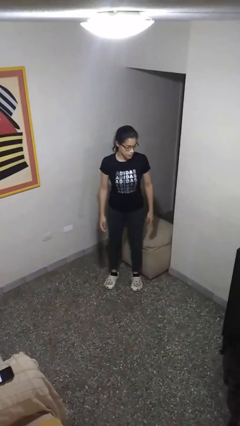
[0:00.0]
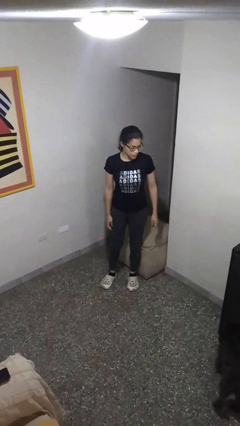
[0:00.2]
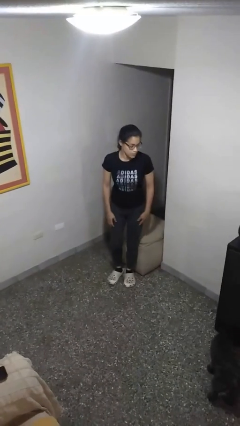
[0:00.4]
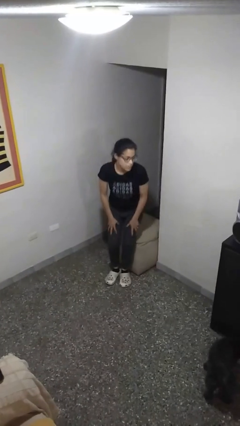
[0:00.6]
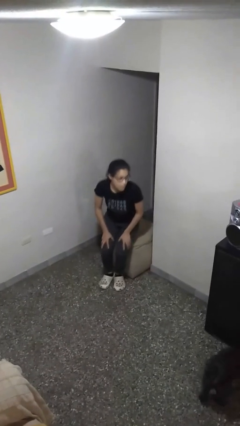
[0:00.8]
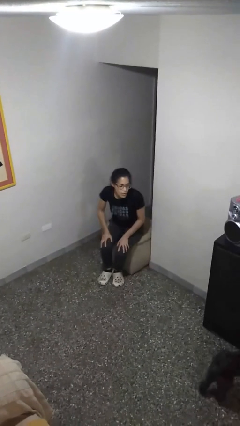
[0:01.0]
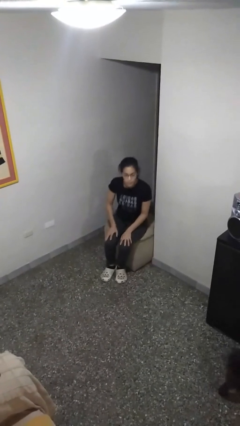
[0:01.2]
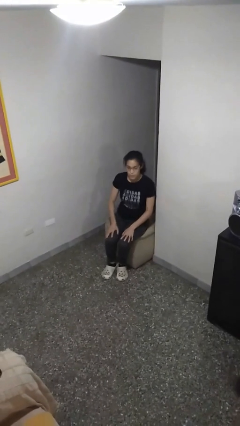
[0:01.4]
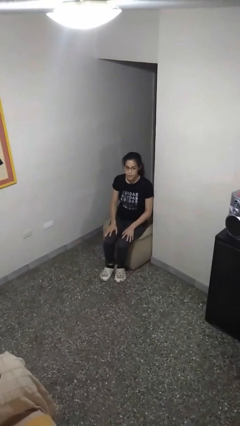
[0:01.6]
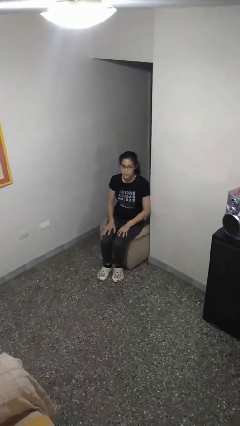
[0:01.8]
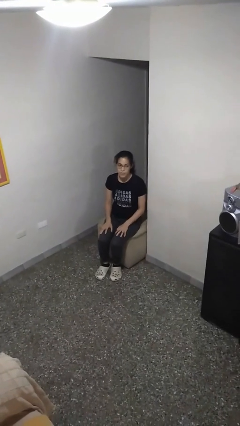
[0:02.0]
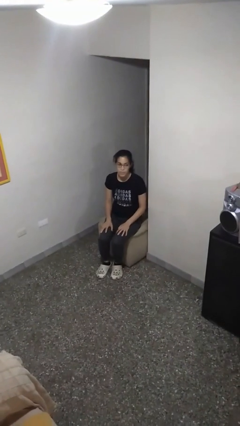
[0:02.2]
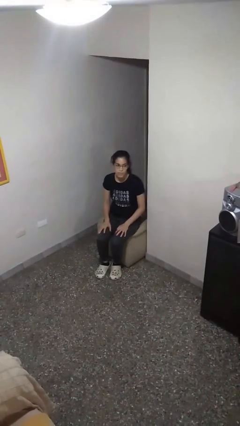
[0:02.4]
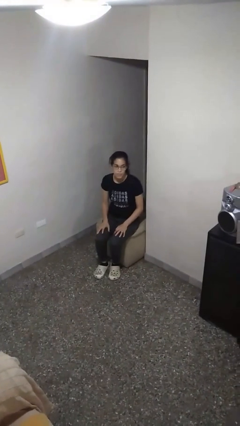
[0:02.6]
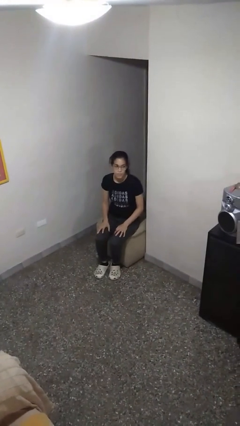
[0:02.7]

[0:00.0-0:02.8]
person sits down

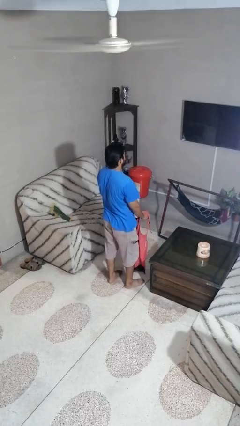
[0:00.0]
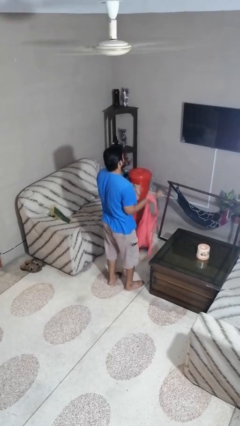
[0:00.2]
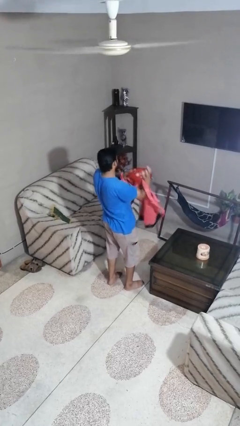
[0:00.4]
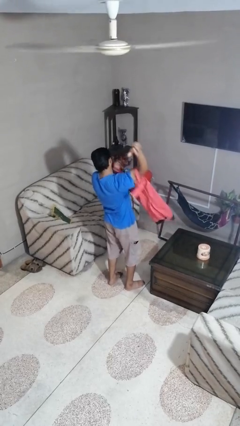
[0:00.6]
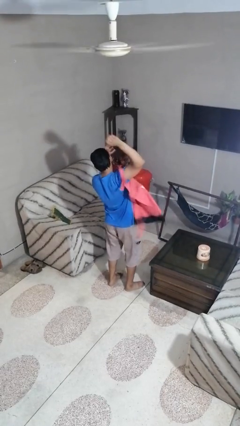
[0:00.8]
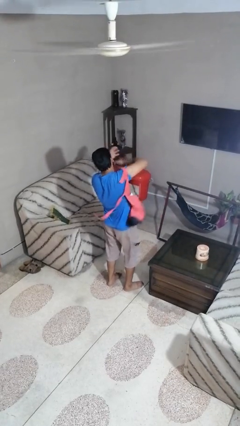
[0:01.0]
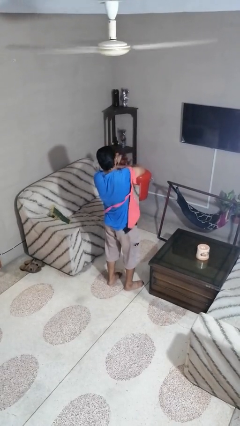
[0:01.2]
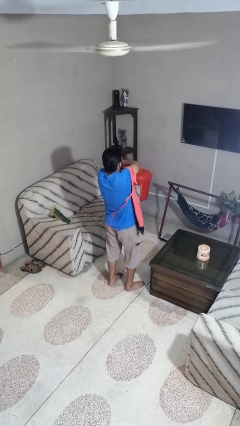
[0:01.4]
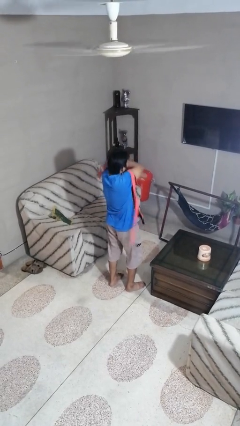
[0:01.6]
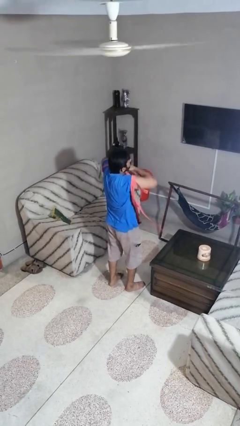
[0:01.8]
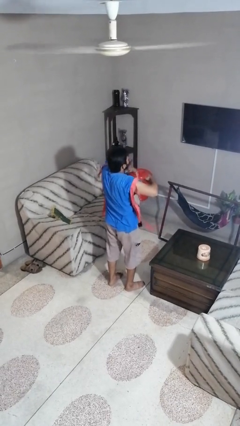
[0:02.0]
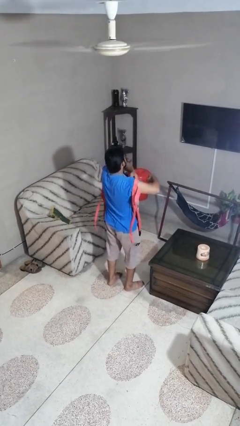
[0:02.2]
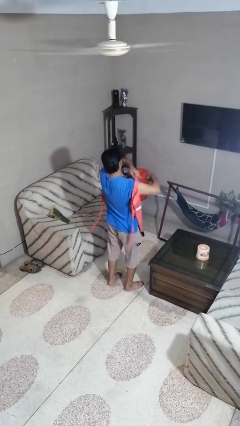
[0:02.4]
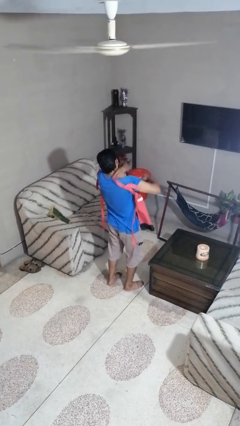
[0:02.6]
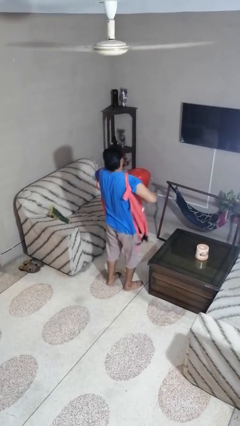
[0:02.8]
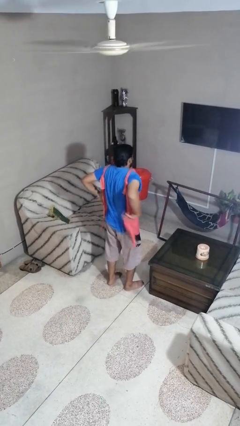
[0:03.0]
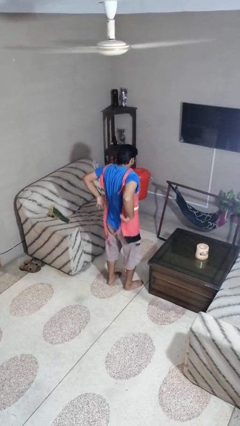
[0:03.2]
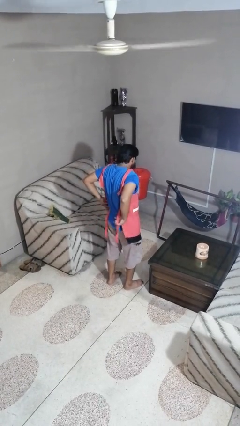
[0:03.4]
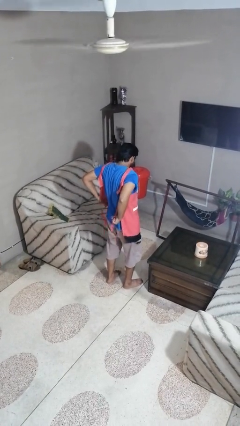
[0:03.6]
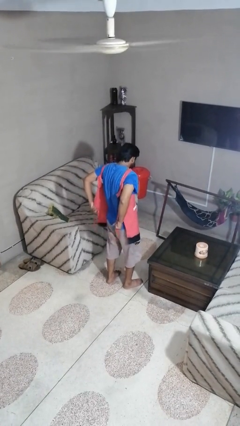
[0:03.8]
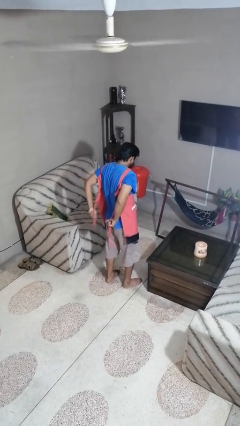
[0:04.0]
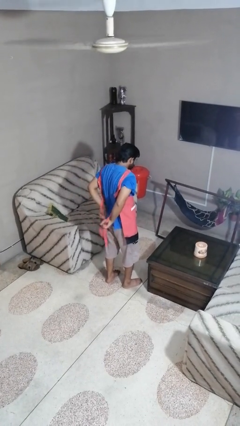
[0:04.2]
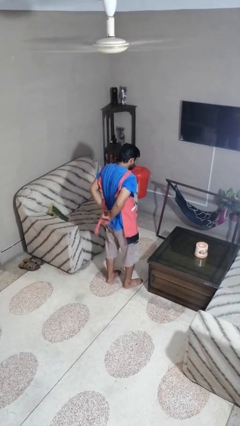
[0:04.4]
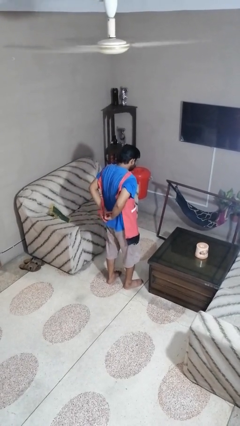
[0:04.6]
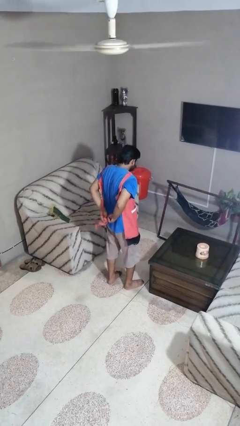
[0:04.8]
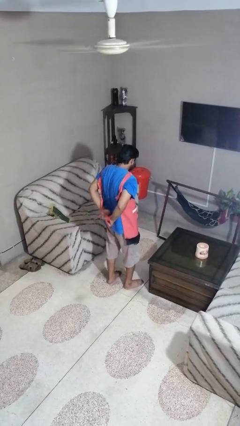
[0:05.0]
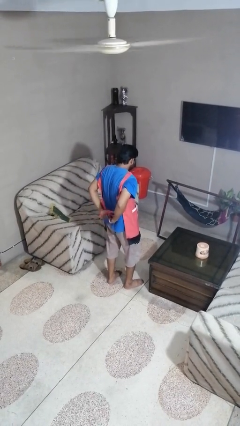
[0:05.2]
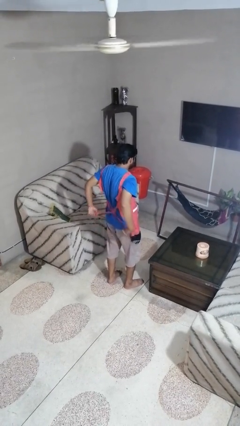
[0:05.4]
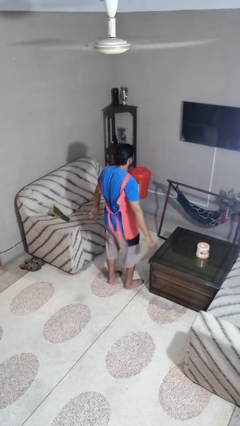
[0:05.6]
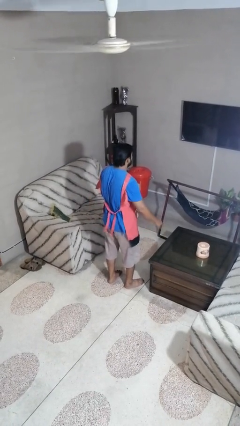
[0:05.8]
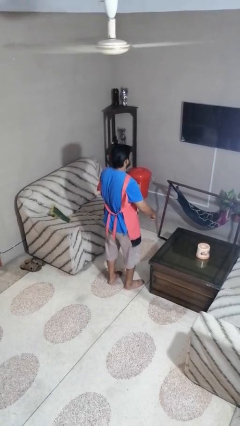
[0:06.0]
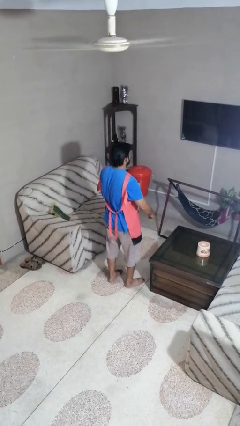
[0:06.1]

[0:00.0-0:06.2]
person puts on apron

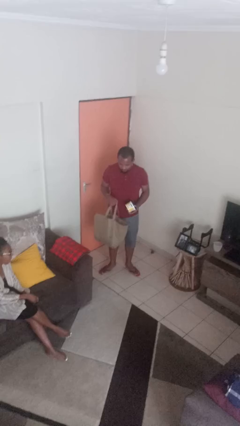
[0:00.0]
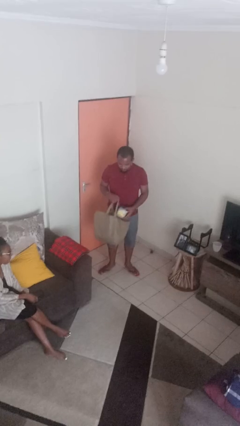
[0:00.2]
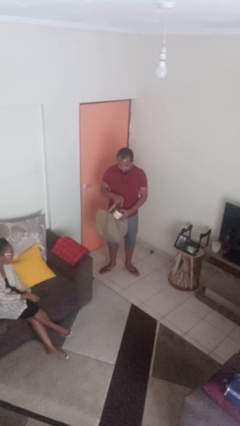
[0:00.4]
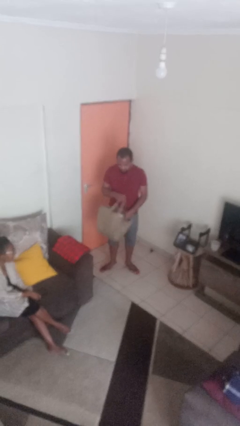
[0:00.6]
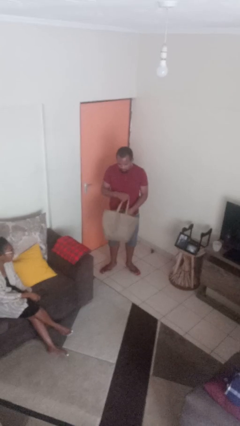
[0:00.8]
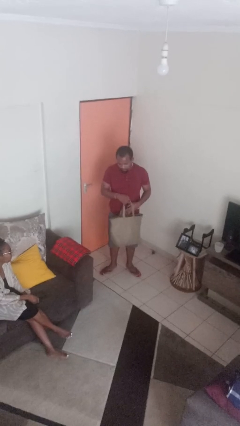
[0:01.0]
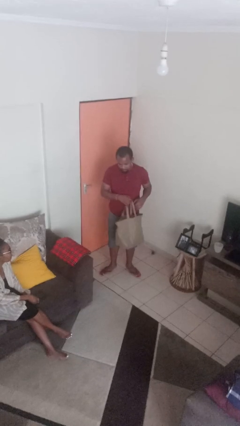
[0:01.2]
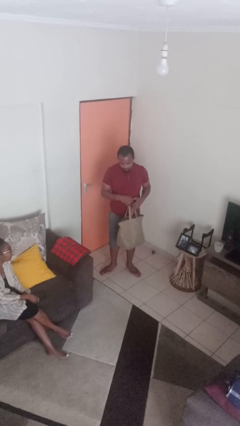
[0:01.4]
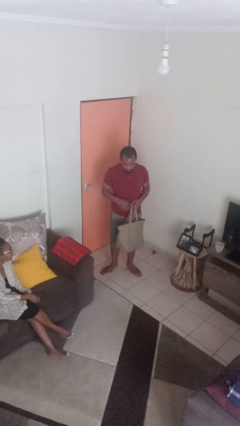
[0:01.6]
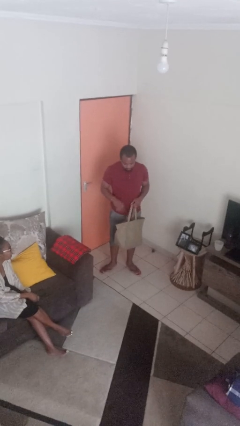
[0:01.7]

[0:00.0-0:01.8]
person puts object into bag

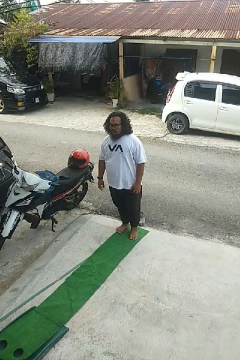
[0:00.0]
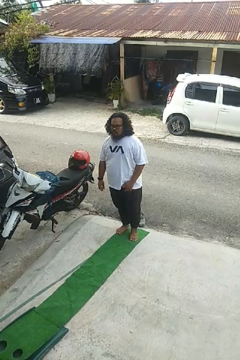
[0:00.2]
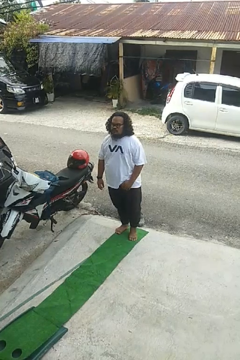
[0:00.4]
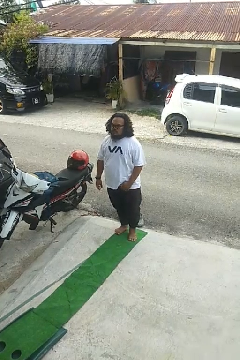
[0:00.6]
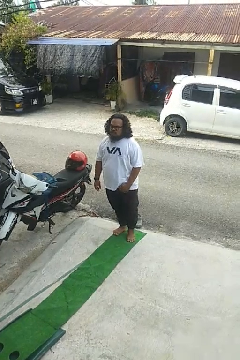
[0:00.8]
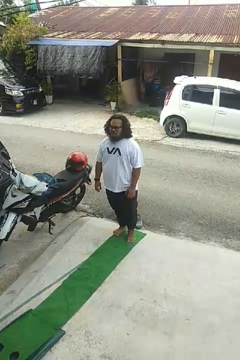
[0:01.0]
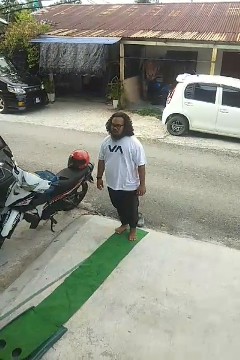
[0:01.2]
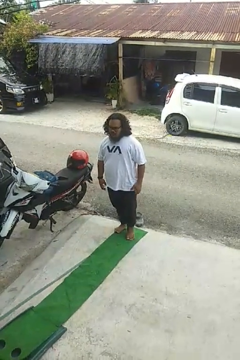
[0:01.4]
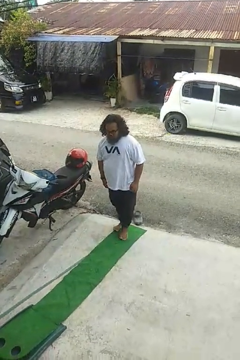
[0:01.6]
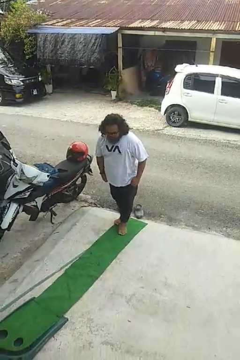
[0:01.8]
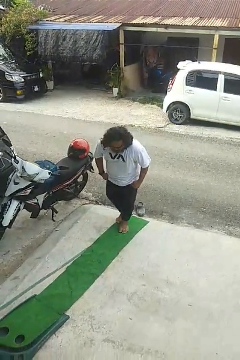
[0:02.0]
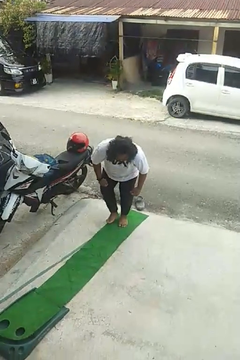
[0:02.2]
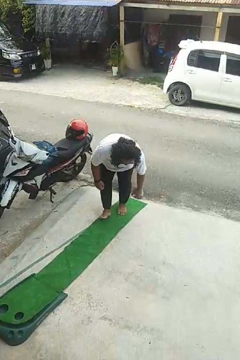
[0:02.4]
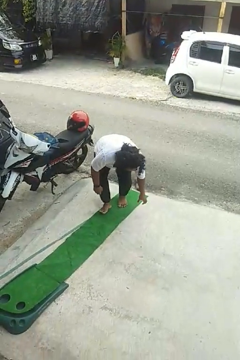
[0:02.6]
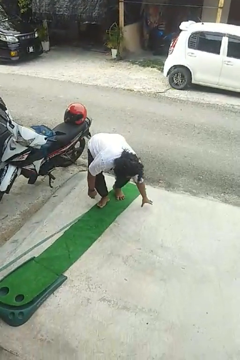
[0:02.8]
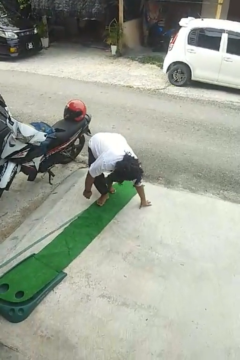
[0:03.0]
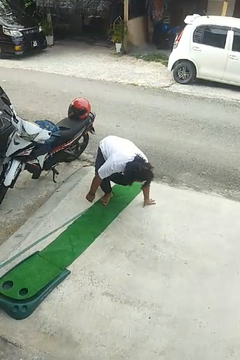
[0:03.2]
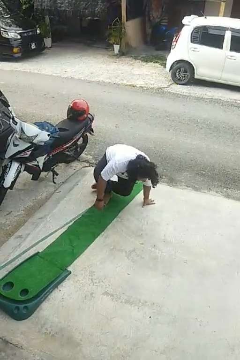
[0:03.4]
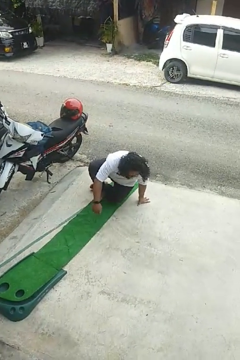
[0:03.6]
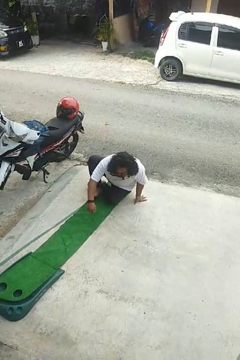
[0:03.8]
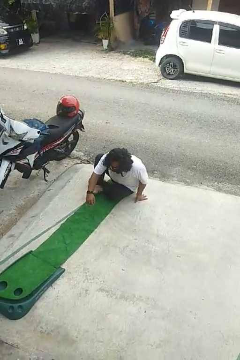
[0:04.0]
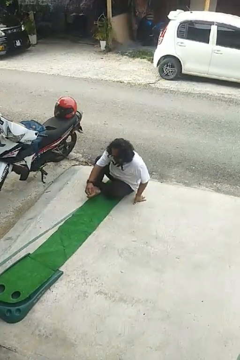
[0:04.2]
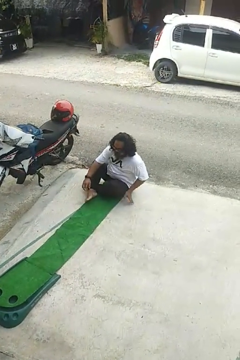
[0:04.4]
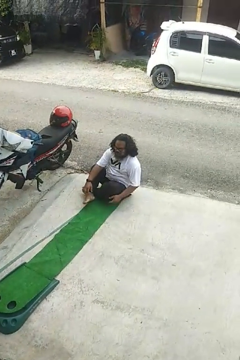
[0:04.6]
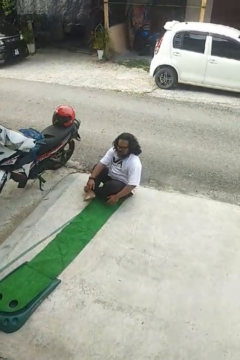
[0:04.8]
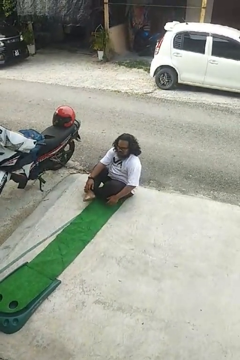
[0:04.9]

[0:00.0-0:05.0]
person sits crisscross

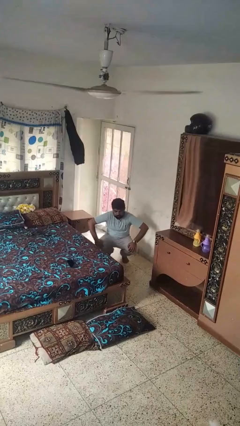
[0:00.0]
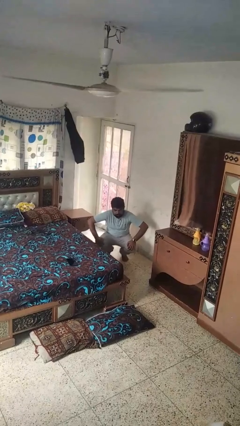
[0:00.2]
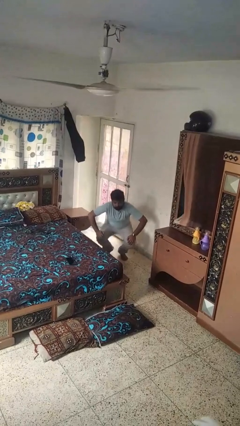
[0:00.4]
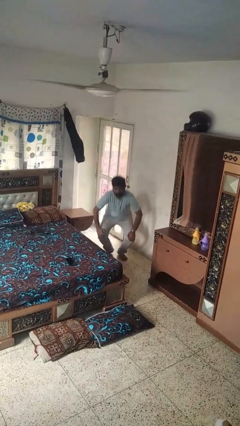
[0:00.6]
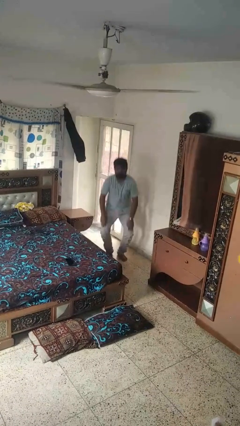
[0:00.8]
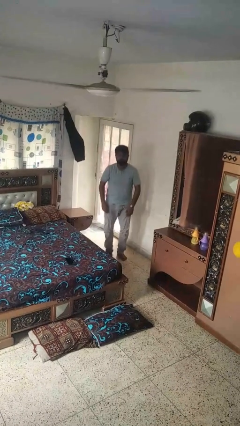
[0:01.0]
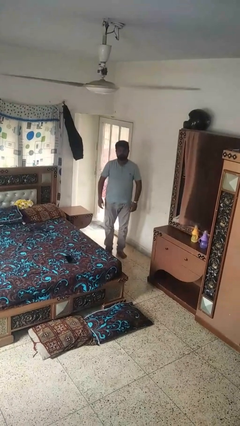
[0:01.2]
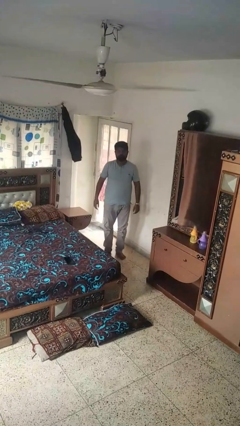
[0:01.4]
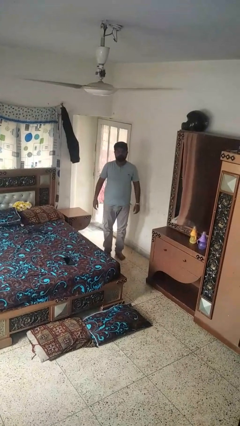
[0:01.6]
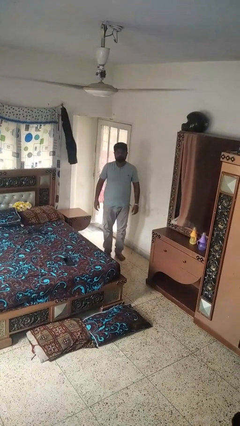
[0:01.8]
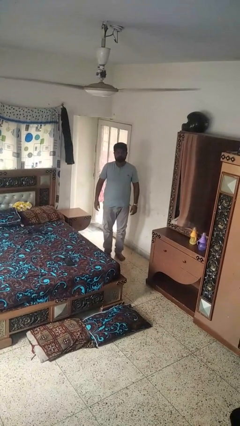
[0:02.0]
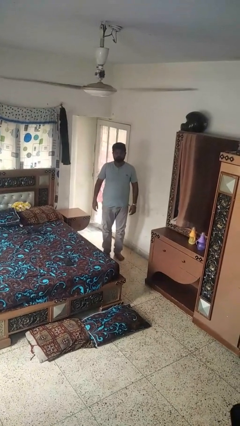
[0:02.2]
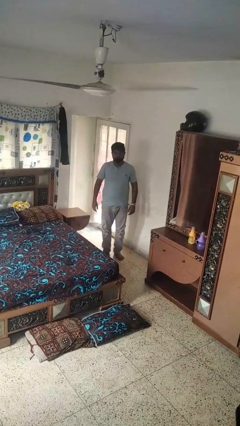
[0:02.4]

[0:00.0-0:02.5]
person stands up
